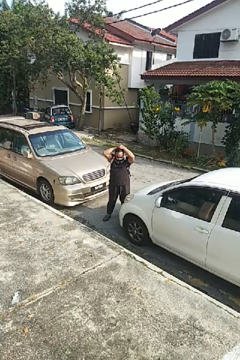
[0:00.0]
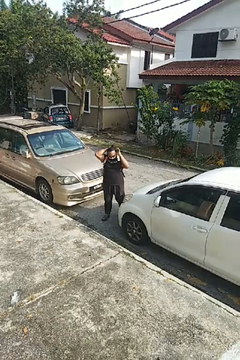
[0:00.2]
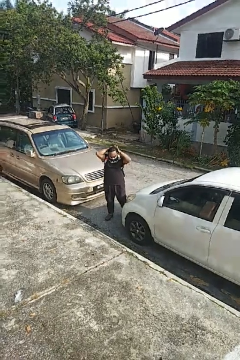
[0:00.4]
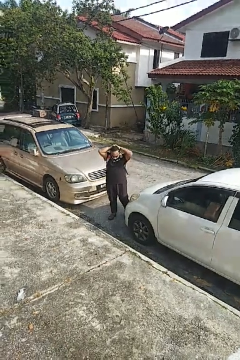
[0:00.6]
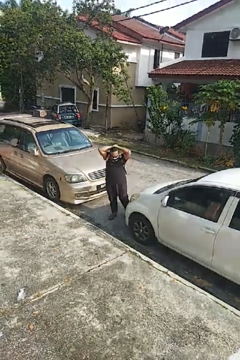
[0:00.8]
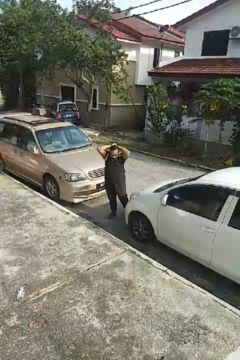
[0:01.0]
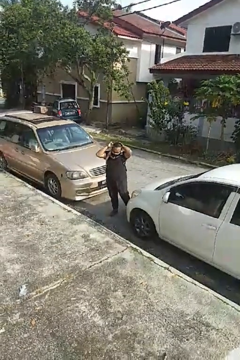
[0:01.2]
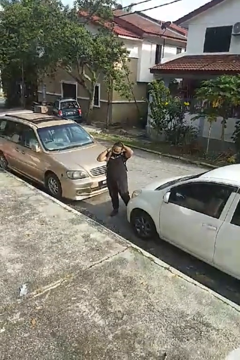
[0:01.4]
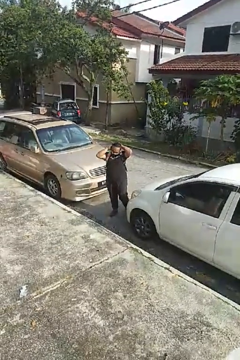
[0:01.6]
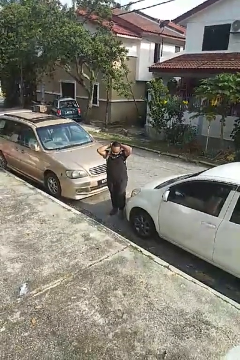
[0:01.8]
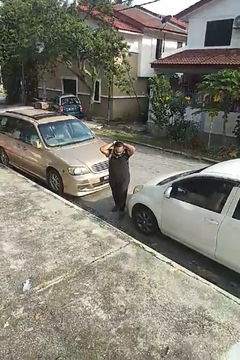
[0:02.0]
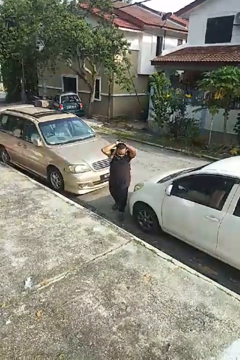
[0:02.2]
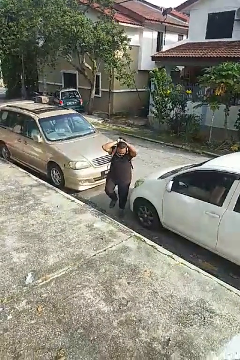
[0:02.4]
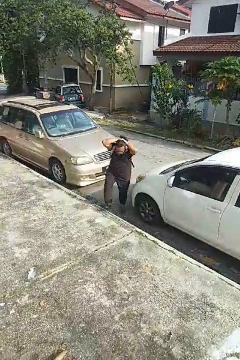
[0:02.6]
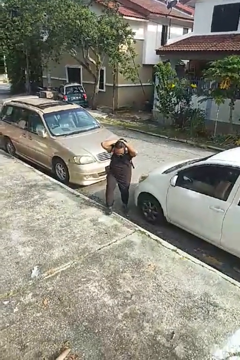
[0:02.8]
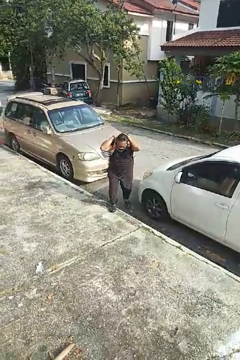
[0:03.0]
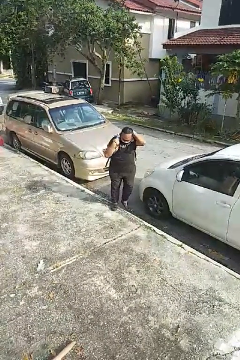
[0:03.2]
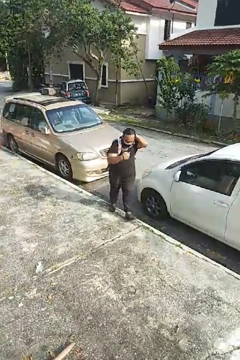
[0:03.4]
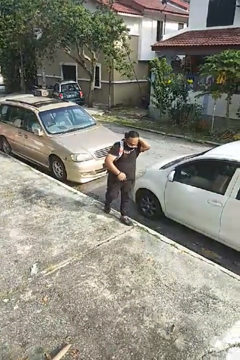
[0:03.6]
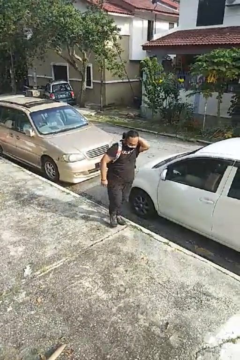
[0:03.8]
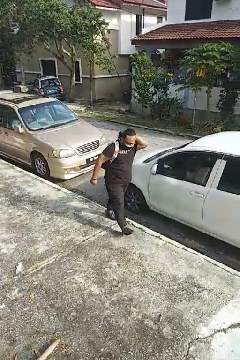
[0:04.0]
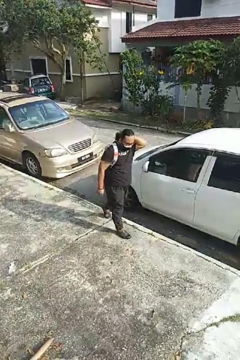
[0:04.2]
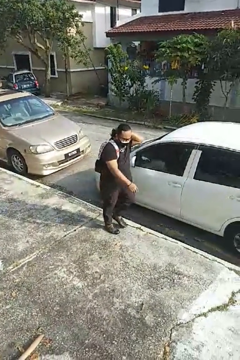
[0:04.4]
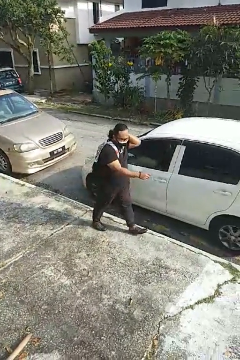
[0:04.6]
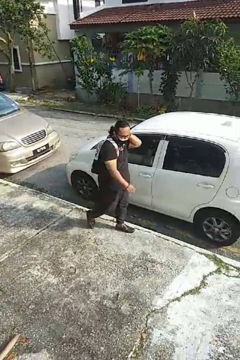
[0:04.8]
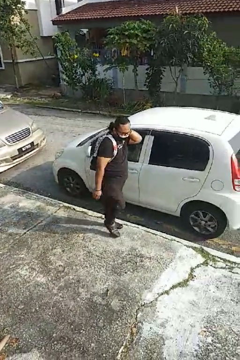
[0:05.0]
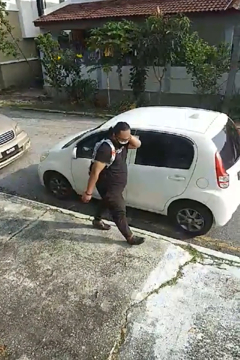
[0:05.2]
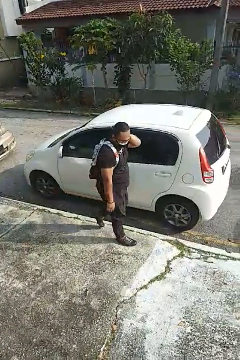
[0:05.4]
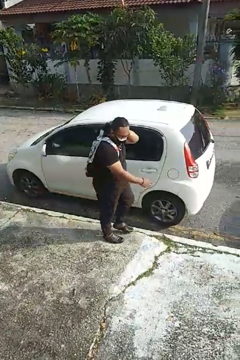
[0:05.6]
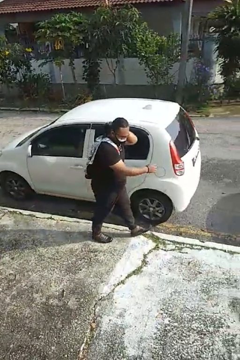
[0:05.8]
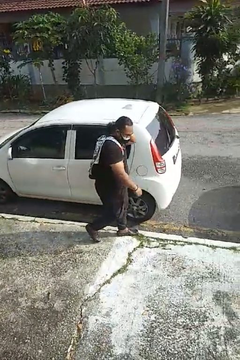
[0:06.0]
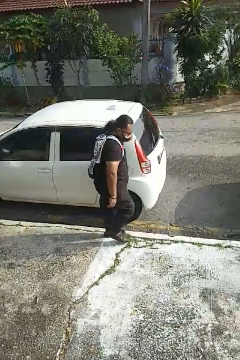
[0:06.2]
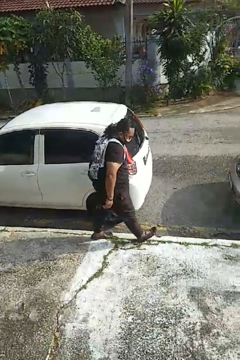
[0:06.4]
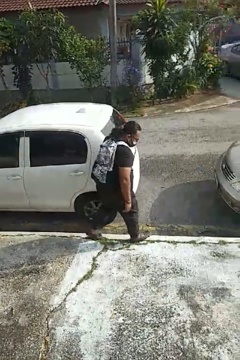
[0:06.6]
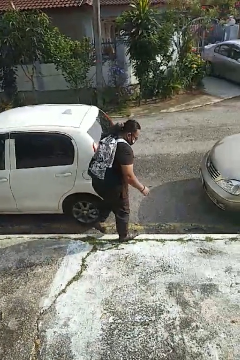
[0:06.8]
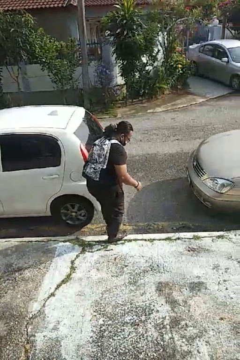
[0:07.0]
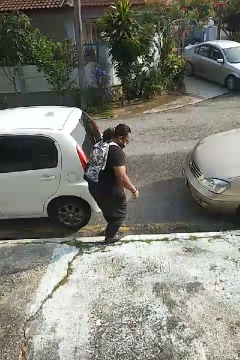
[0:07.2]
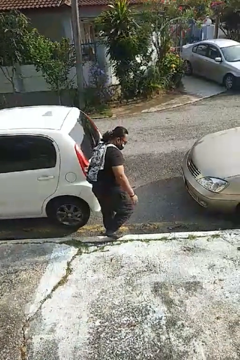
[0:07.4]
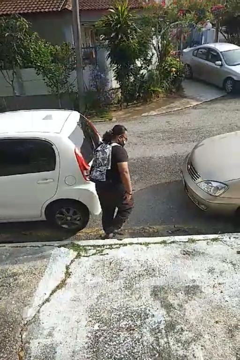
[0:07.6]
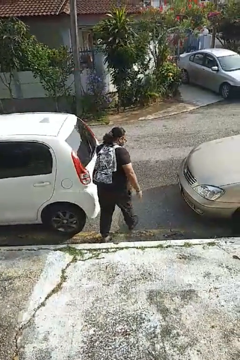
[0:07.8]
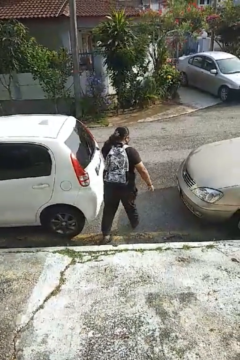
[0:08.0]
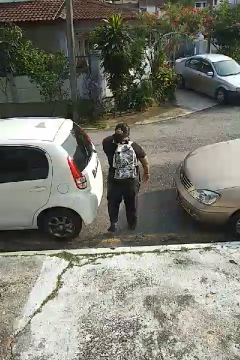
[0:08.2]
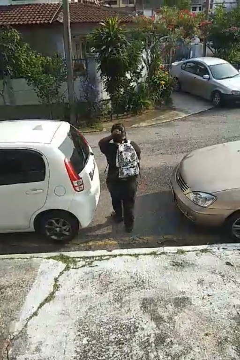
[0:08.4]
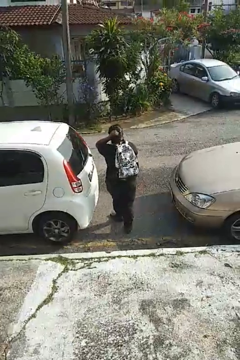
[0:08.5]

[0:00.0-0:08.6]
person walks around car

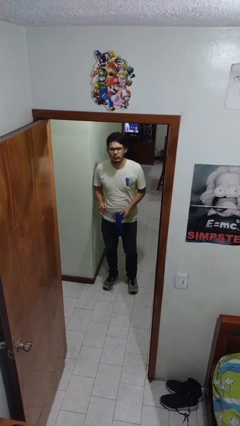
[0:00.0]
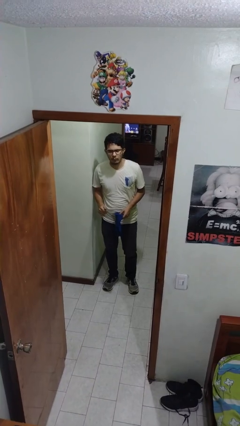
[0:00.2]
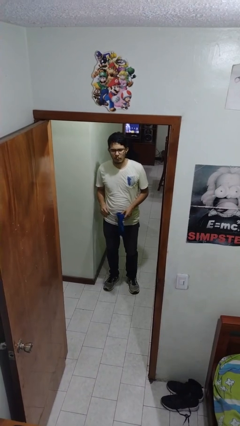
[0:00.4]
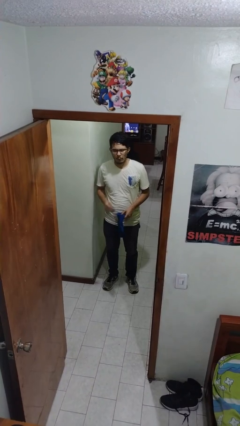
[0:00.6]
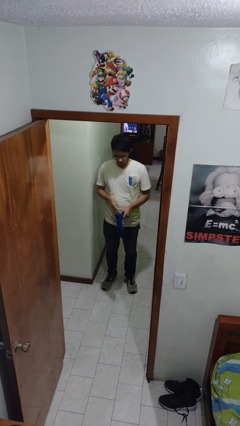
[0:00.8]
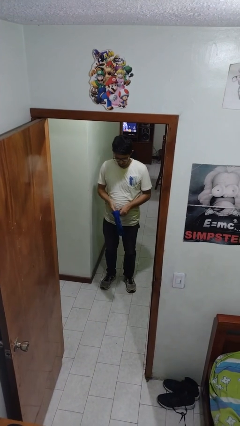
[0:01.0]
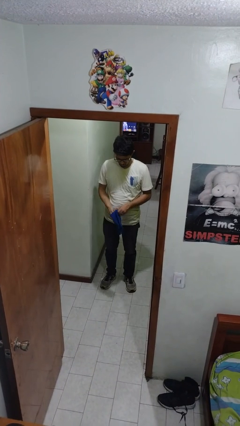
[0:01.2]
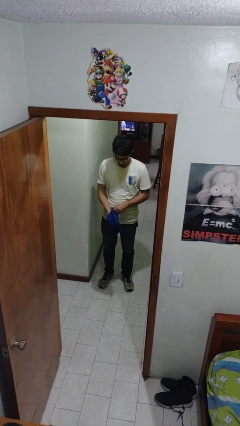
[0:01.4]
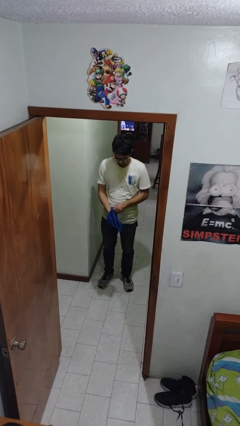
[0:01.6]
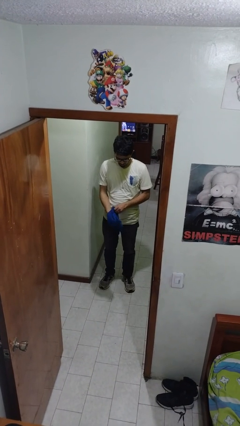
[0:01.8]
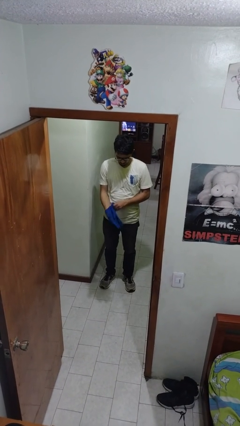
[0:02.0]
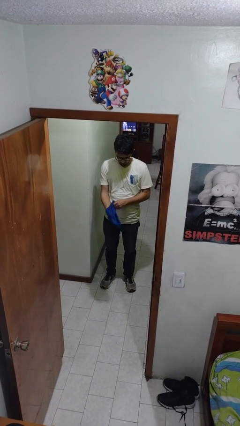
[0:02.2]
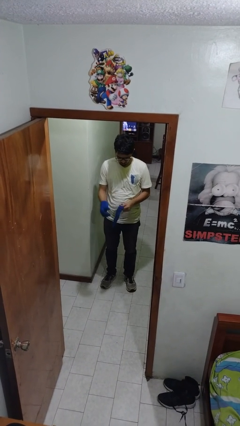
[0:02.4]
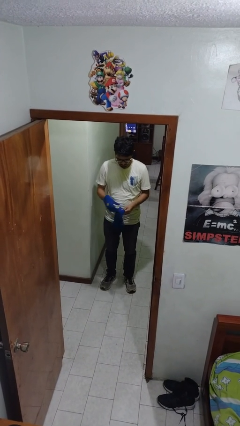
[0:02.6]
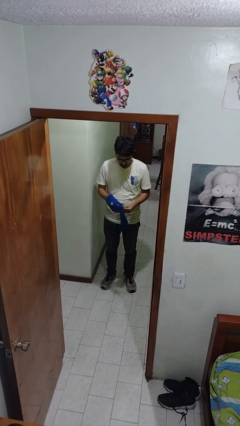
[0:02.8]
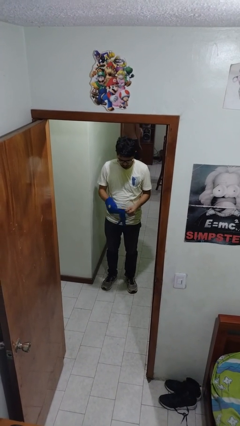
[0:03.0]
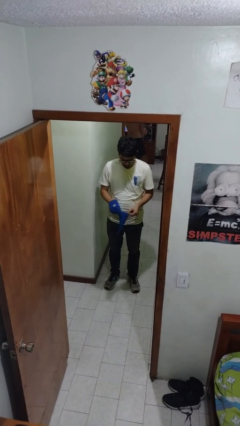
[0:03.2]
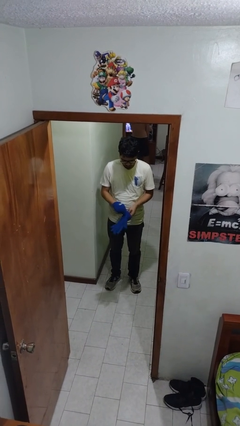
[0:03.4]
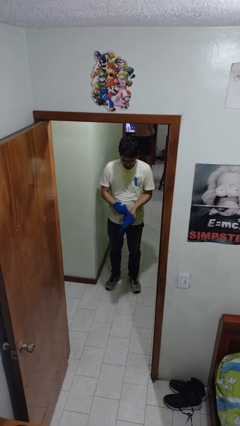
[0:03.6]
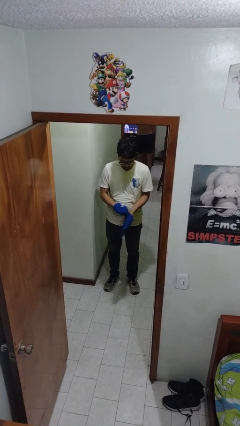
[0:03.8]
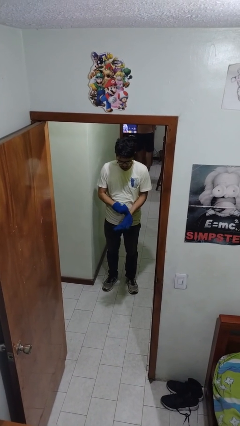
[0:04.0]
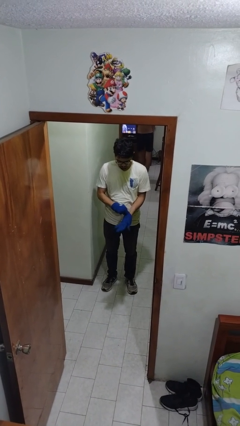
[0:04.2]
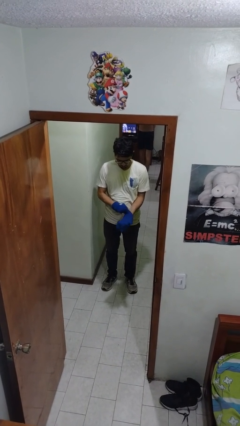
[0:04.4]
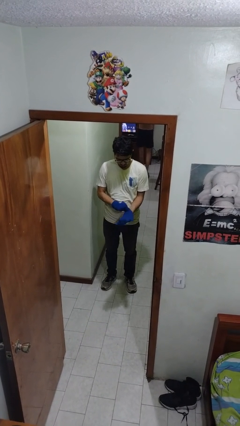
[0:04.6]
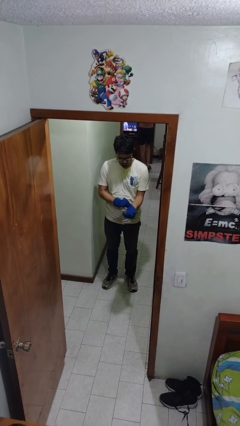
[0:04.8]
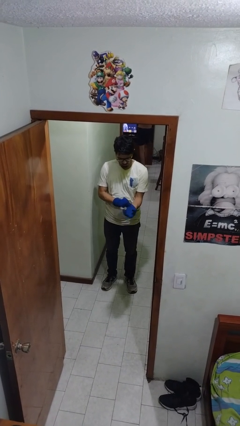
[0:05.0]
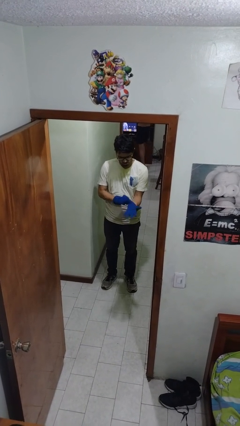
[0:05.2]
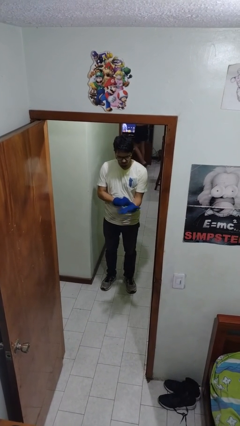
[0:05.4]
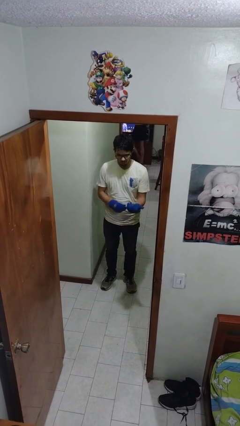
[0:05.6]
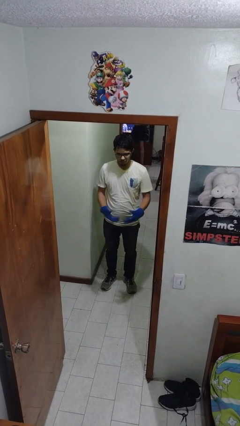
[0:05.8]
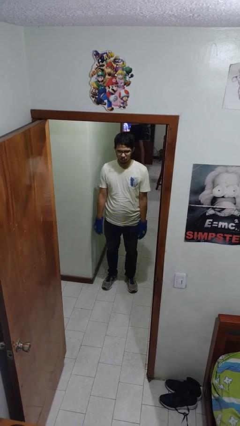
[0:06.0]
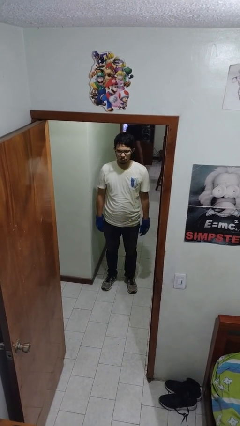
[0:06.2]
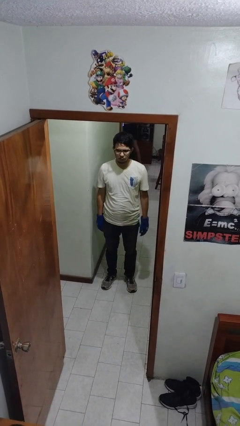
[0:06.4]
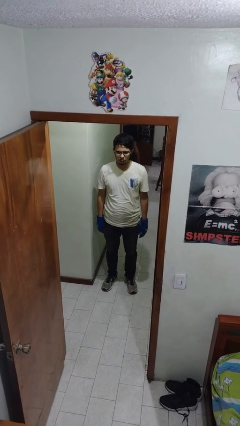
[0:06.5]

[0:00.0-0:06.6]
person puts on gloves

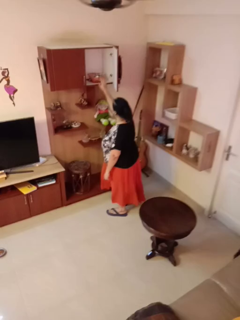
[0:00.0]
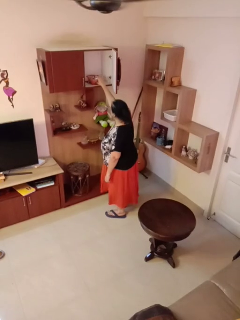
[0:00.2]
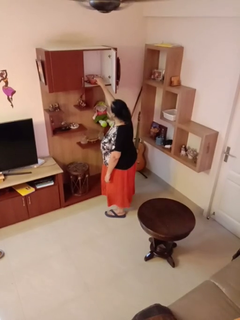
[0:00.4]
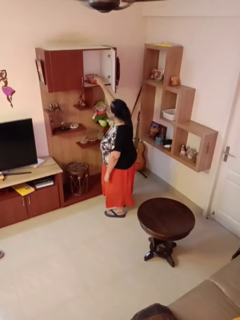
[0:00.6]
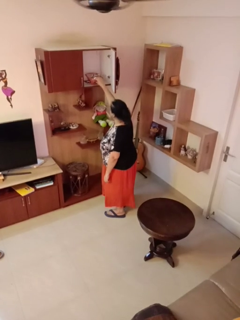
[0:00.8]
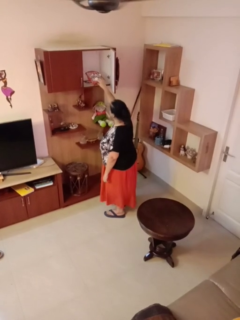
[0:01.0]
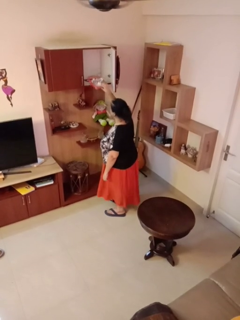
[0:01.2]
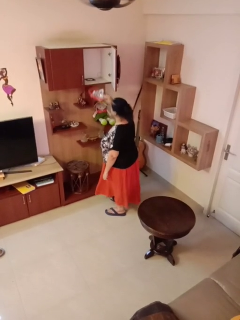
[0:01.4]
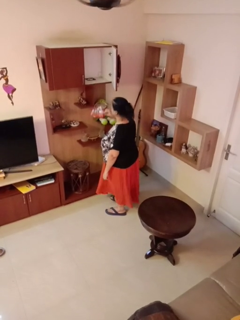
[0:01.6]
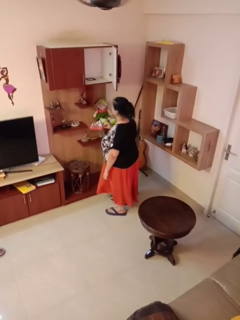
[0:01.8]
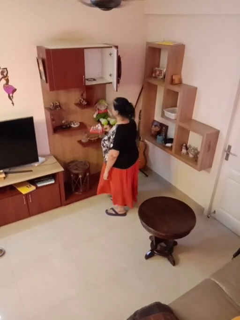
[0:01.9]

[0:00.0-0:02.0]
person picks up object from cabinet

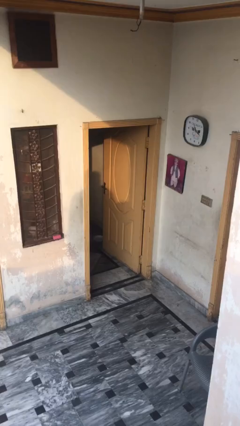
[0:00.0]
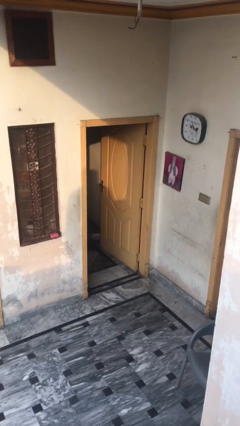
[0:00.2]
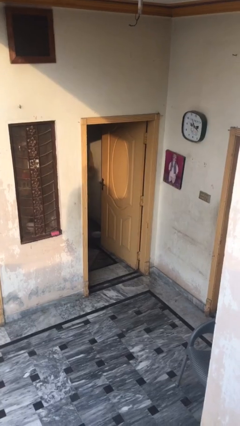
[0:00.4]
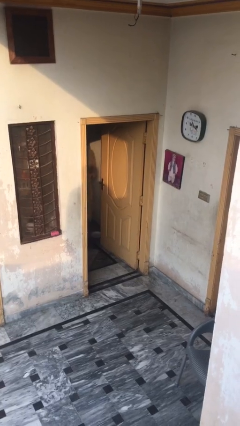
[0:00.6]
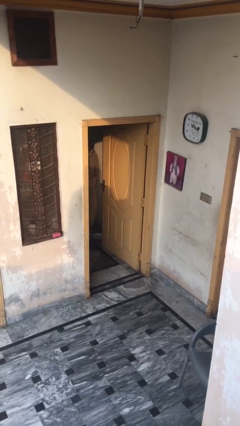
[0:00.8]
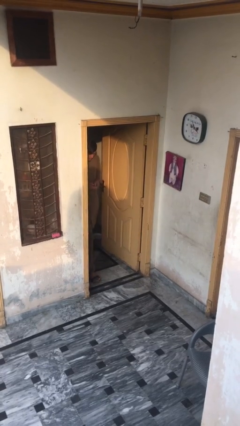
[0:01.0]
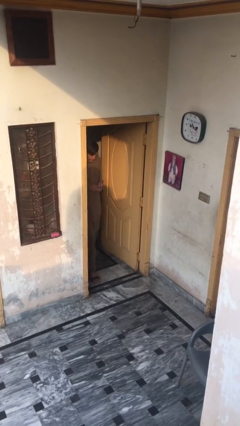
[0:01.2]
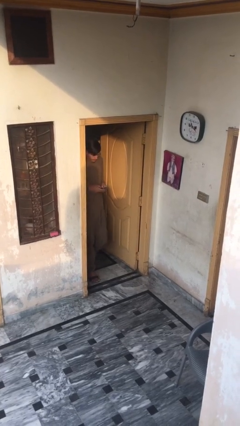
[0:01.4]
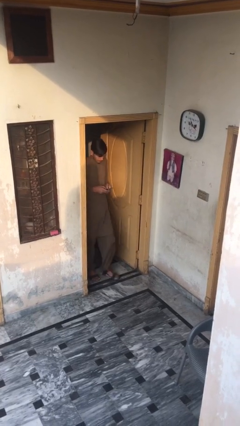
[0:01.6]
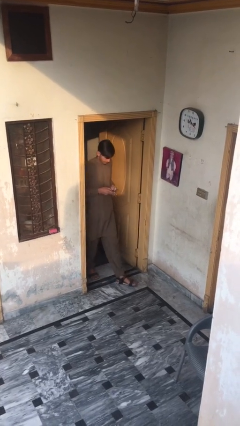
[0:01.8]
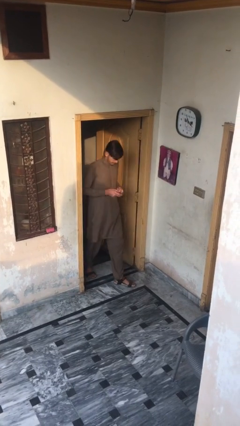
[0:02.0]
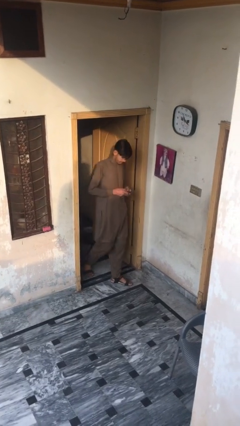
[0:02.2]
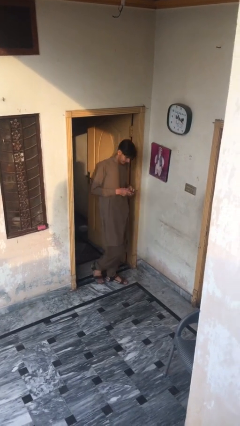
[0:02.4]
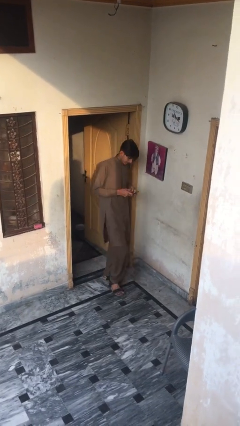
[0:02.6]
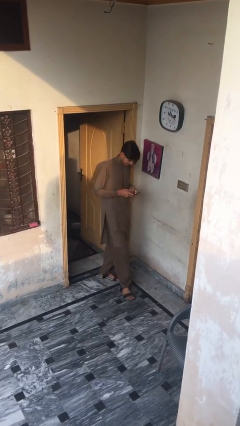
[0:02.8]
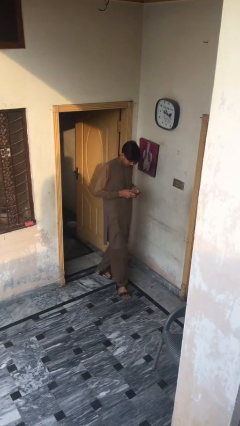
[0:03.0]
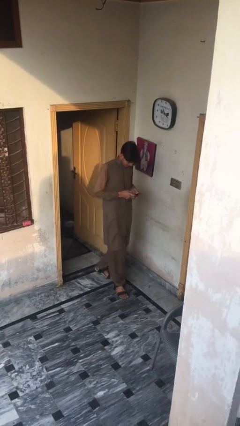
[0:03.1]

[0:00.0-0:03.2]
person enters scene through structure
